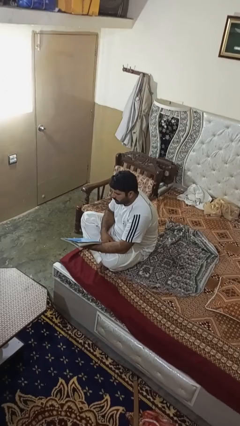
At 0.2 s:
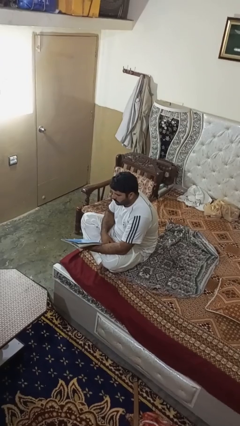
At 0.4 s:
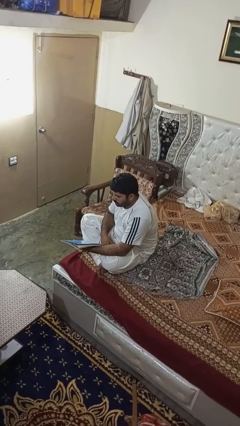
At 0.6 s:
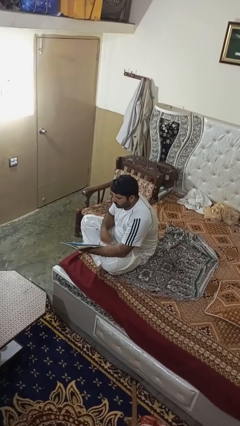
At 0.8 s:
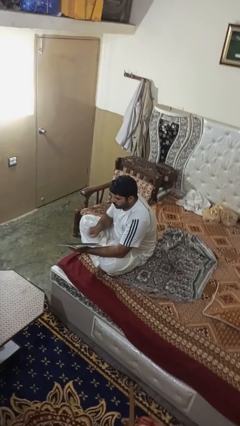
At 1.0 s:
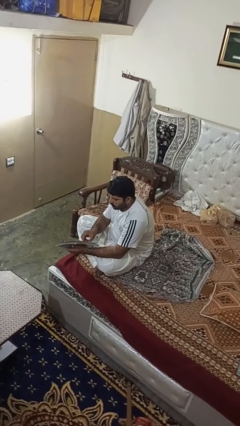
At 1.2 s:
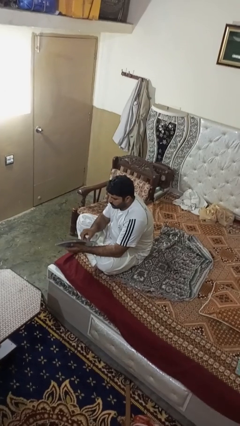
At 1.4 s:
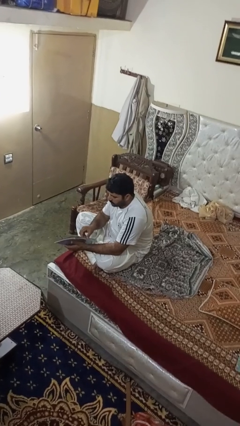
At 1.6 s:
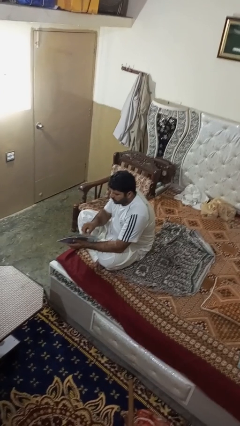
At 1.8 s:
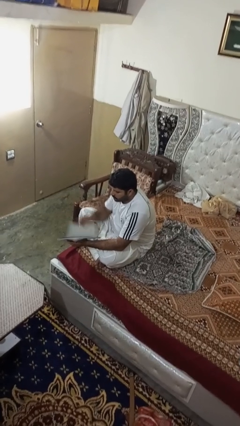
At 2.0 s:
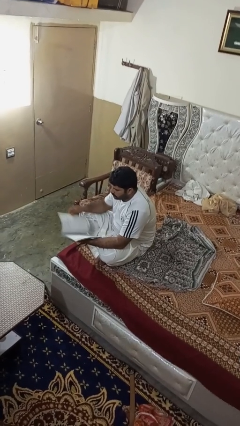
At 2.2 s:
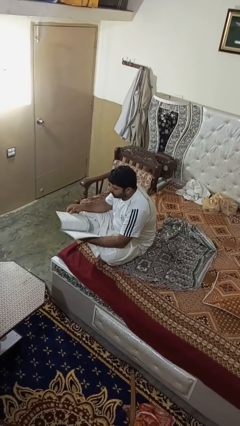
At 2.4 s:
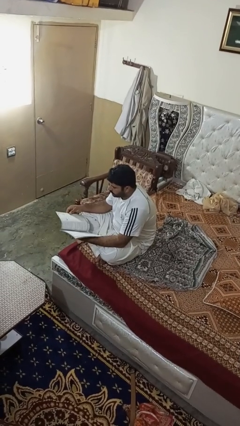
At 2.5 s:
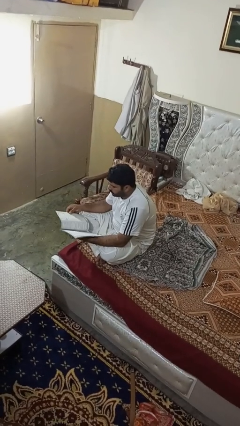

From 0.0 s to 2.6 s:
person reads magazine

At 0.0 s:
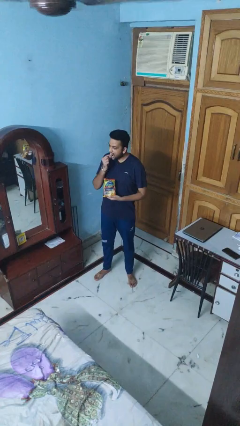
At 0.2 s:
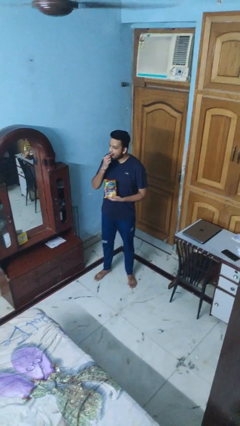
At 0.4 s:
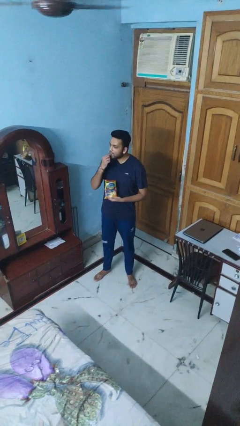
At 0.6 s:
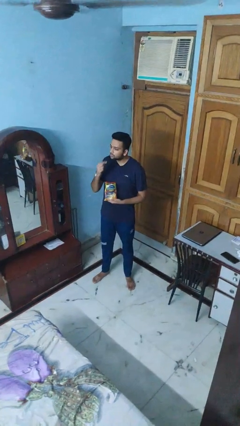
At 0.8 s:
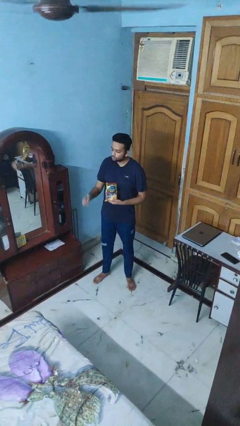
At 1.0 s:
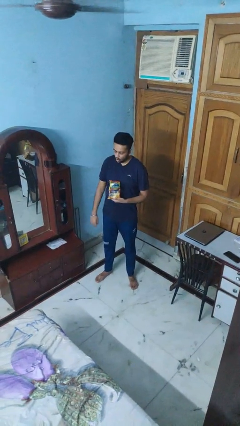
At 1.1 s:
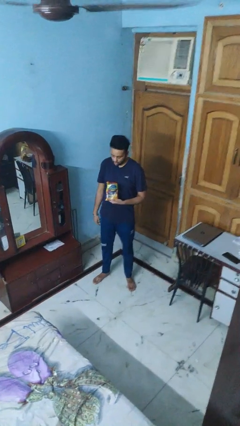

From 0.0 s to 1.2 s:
person eats snack from bag

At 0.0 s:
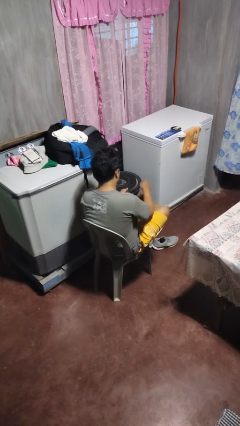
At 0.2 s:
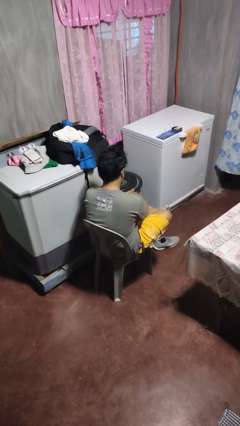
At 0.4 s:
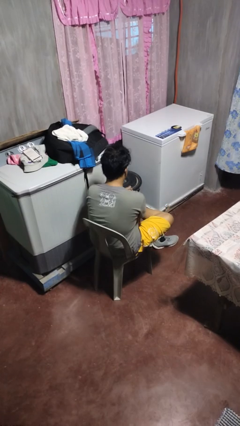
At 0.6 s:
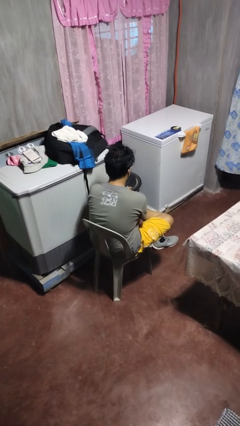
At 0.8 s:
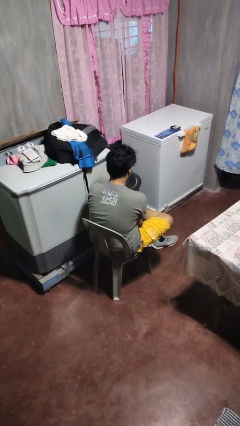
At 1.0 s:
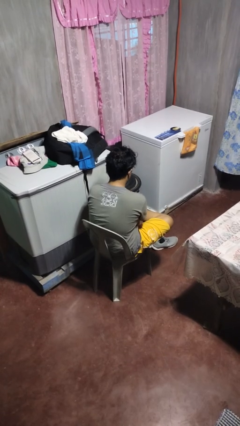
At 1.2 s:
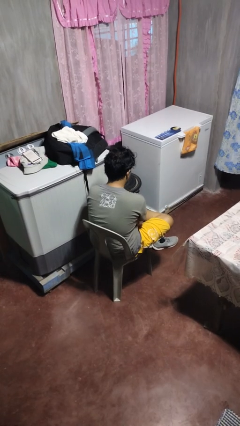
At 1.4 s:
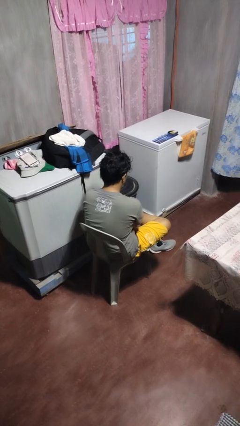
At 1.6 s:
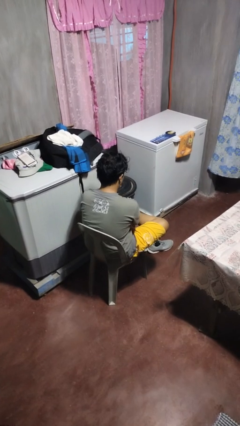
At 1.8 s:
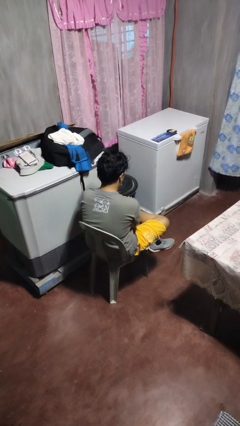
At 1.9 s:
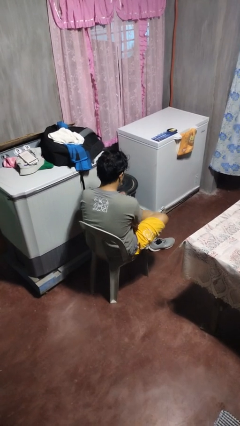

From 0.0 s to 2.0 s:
person rubs foot

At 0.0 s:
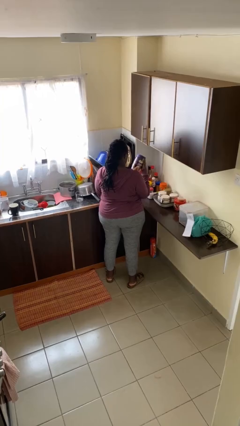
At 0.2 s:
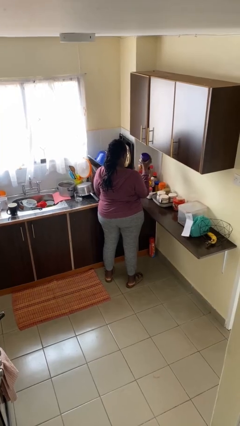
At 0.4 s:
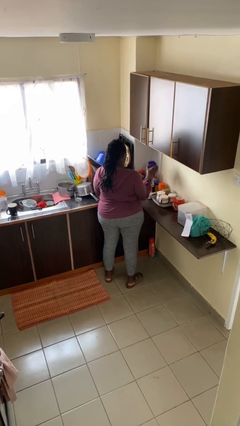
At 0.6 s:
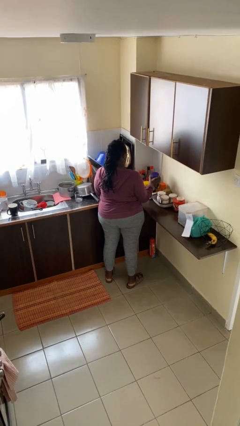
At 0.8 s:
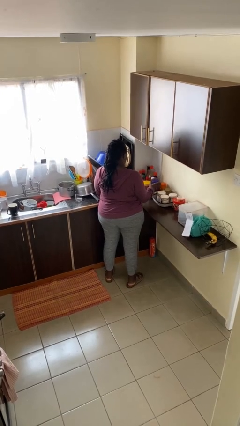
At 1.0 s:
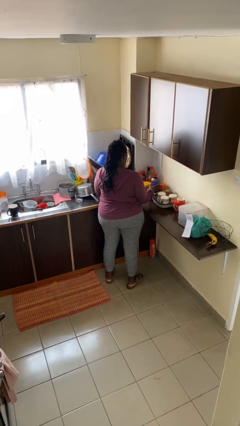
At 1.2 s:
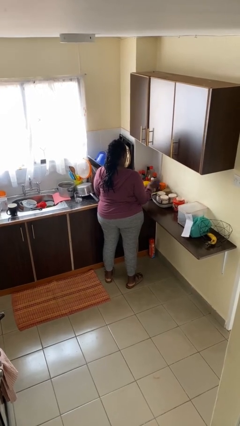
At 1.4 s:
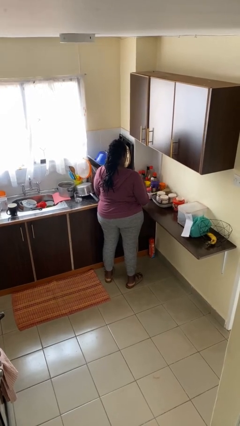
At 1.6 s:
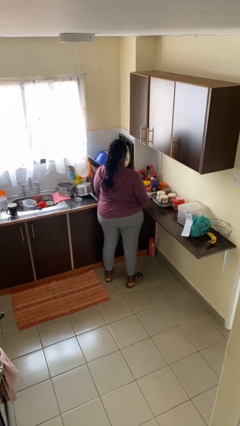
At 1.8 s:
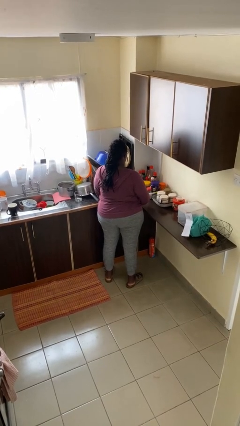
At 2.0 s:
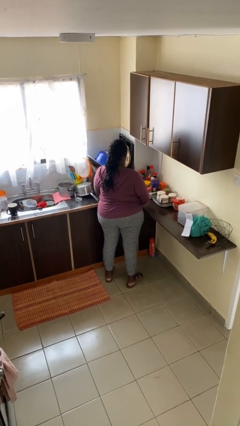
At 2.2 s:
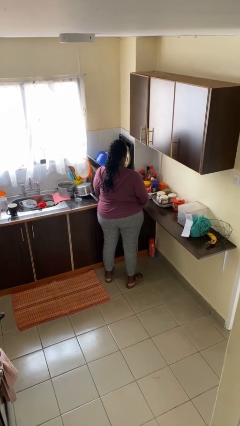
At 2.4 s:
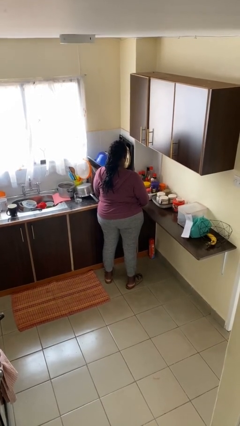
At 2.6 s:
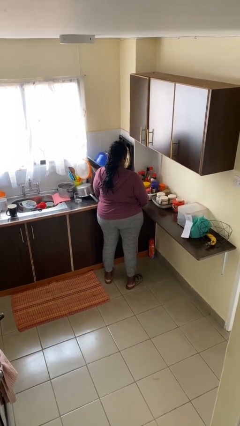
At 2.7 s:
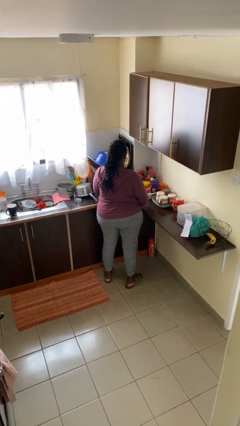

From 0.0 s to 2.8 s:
person puts down object on countertop

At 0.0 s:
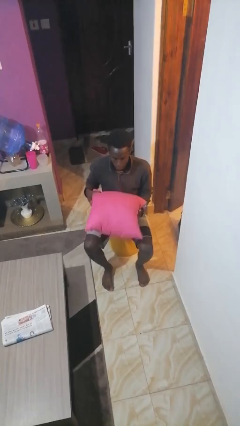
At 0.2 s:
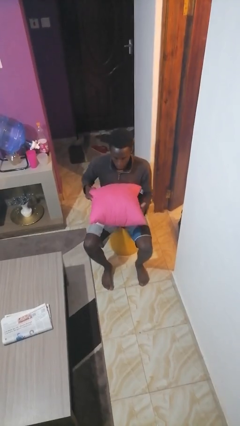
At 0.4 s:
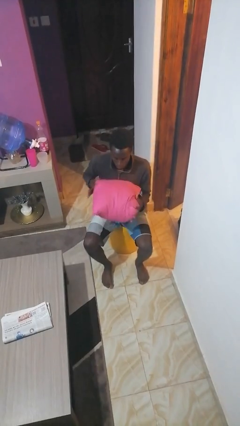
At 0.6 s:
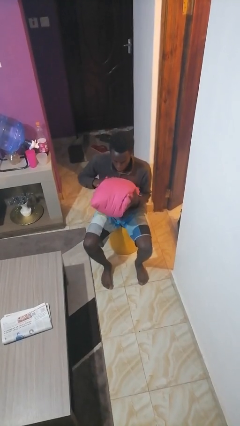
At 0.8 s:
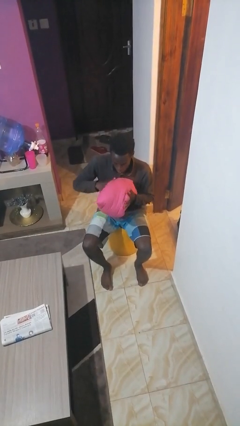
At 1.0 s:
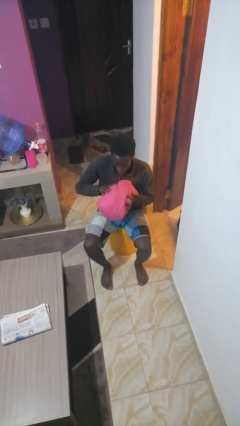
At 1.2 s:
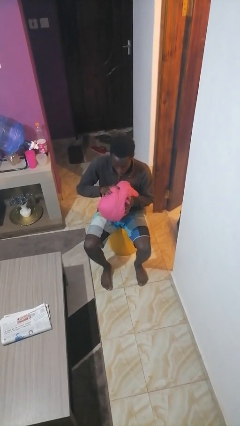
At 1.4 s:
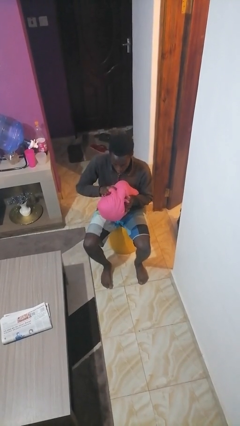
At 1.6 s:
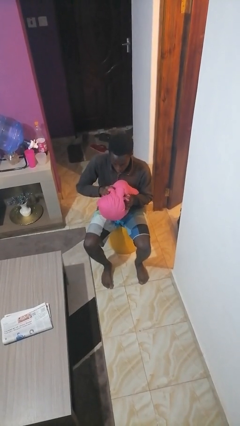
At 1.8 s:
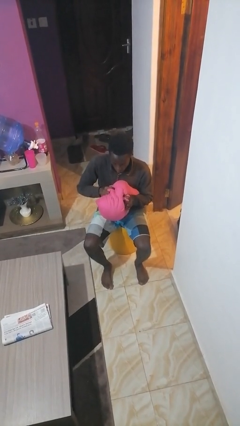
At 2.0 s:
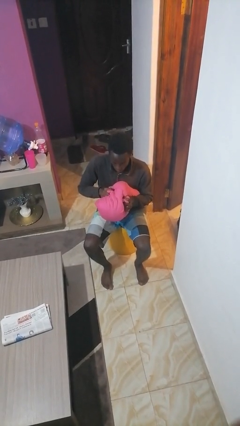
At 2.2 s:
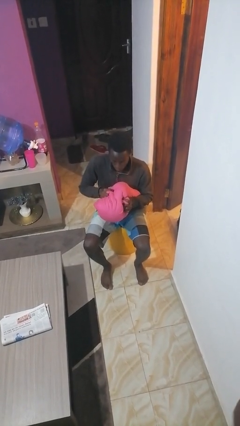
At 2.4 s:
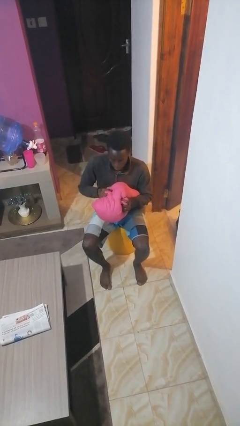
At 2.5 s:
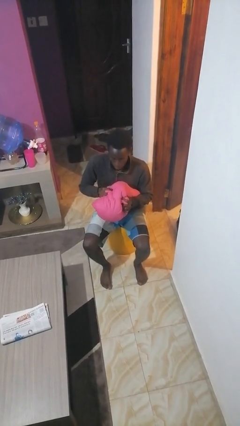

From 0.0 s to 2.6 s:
person squeezes object

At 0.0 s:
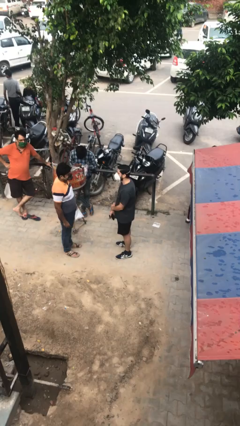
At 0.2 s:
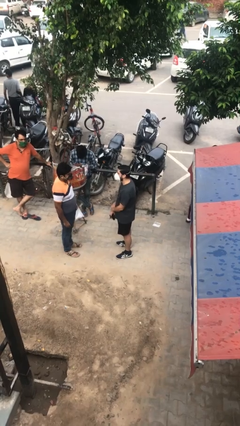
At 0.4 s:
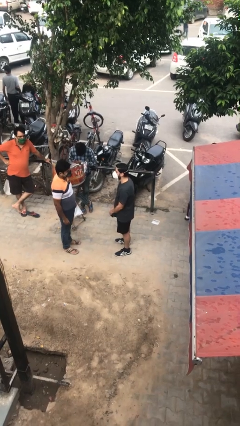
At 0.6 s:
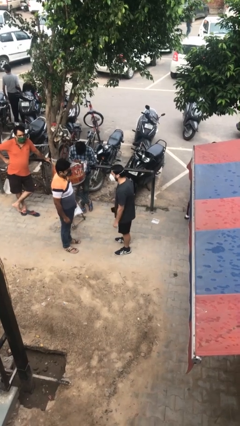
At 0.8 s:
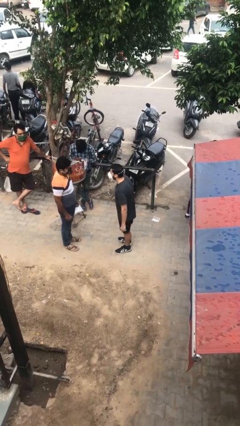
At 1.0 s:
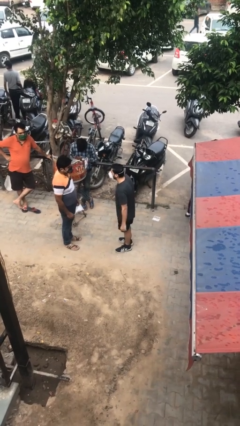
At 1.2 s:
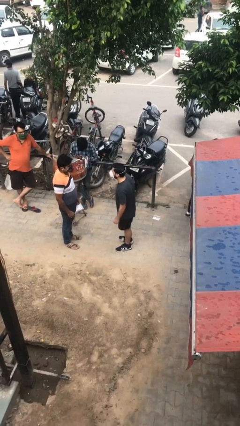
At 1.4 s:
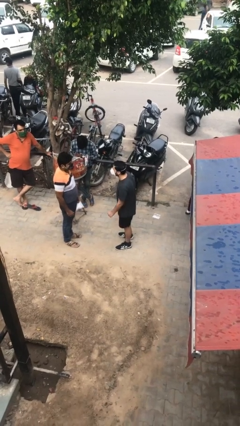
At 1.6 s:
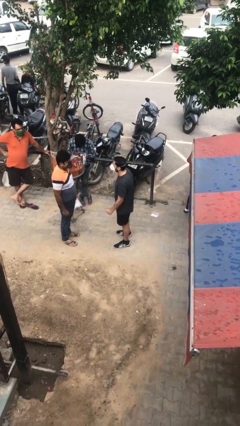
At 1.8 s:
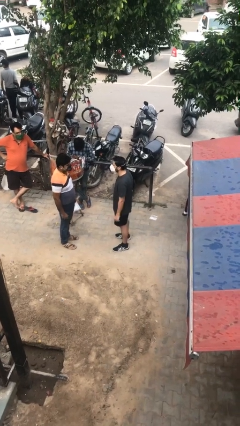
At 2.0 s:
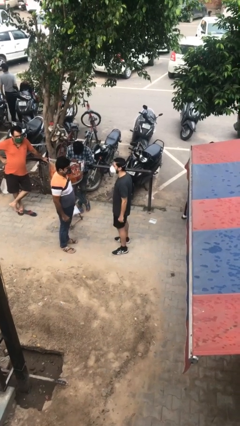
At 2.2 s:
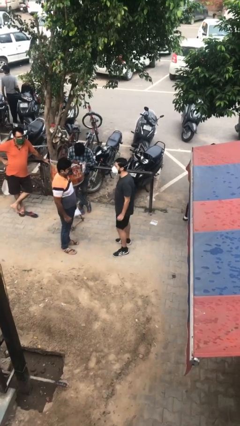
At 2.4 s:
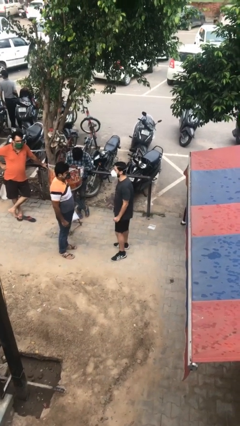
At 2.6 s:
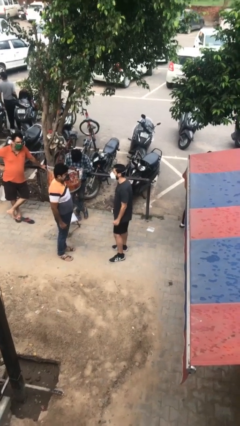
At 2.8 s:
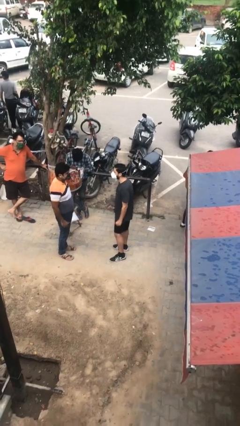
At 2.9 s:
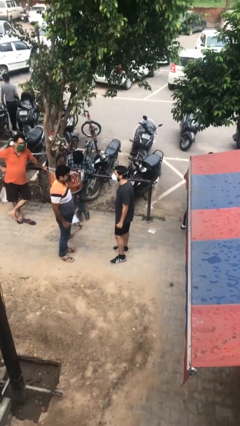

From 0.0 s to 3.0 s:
person talks to person

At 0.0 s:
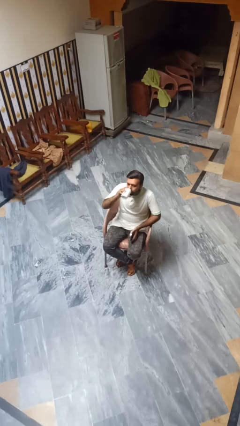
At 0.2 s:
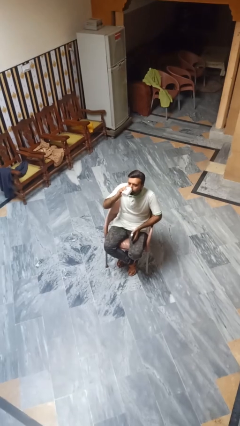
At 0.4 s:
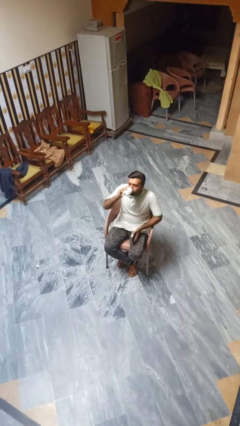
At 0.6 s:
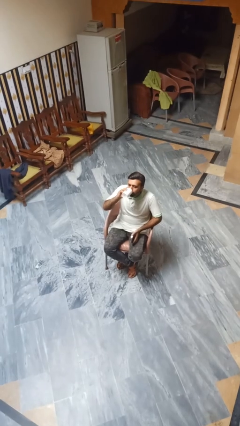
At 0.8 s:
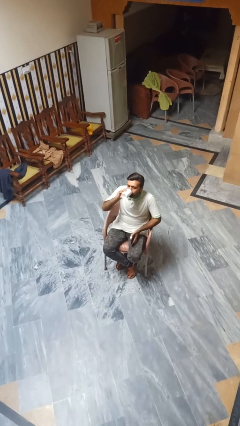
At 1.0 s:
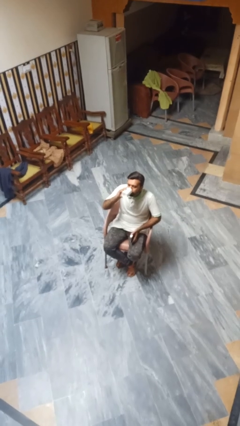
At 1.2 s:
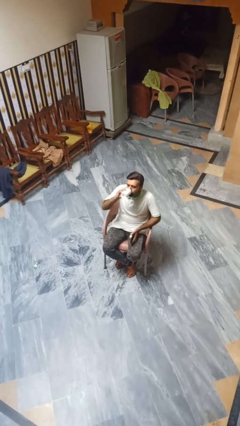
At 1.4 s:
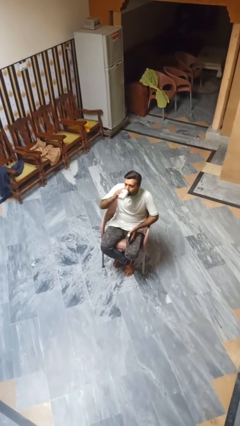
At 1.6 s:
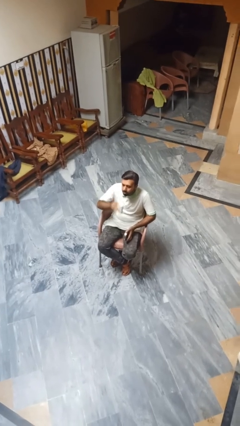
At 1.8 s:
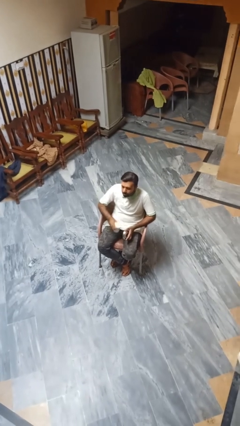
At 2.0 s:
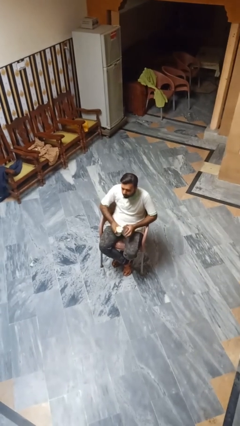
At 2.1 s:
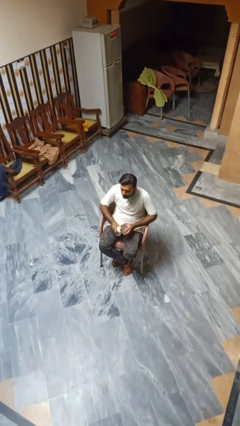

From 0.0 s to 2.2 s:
person drinks from beverage can

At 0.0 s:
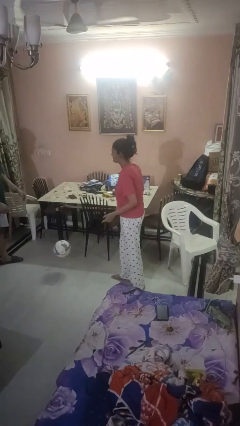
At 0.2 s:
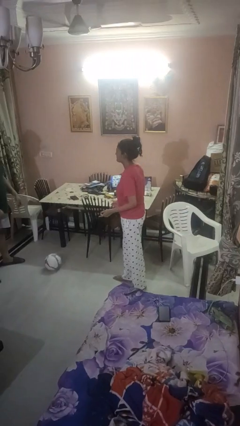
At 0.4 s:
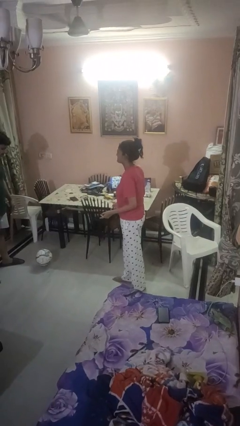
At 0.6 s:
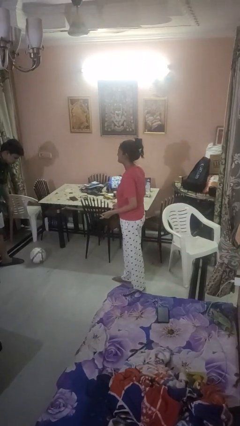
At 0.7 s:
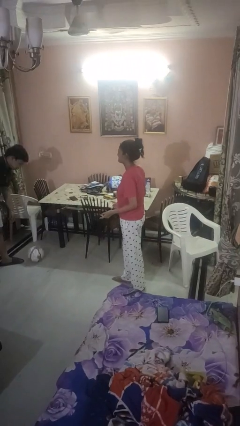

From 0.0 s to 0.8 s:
person catches object from person
